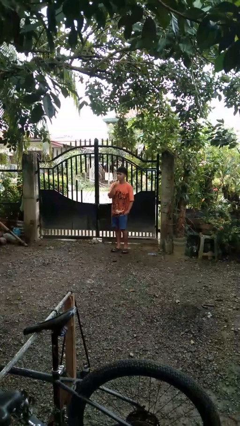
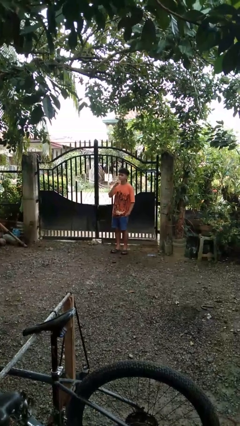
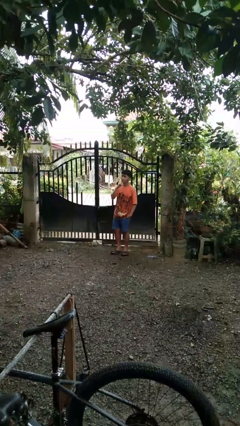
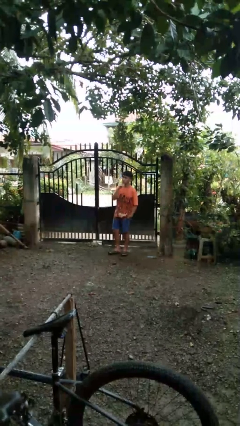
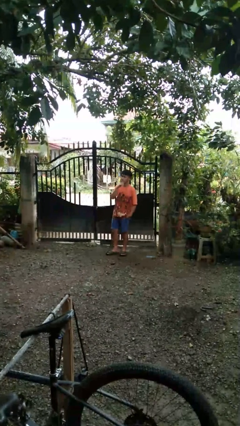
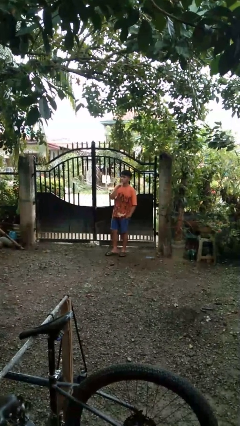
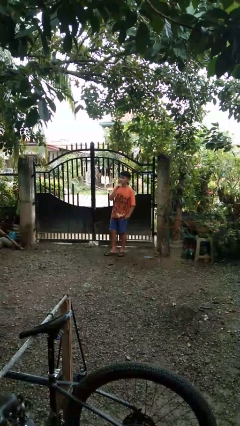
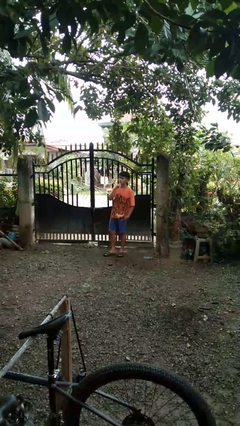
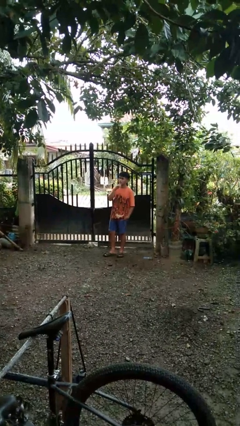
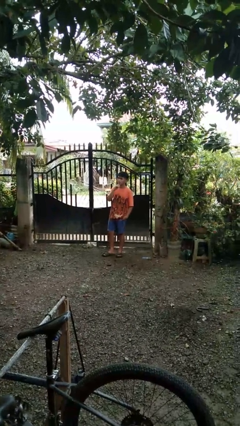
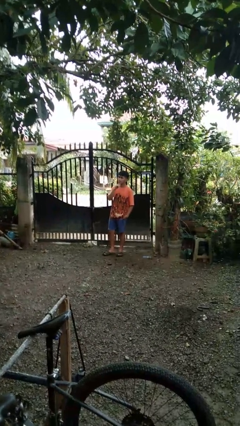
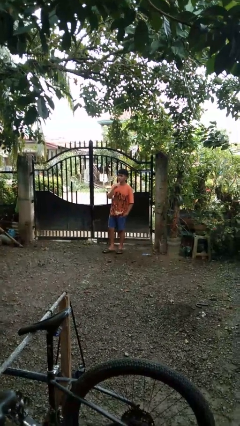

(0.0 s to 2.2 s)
person strokes chin

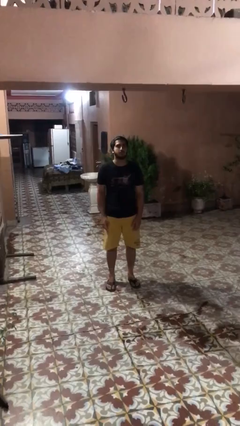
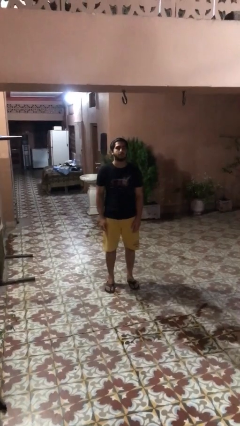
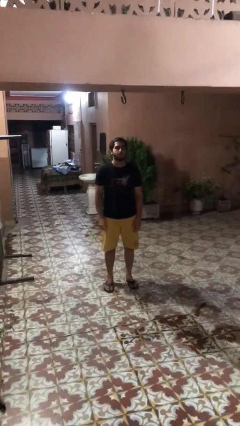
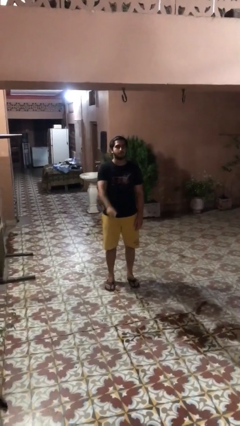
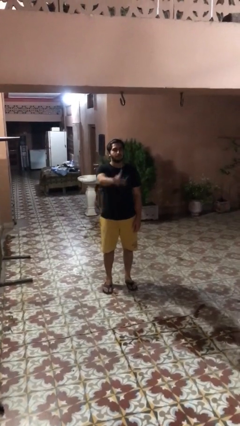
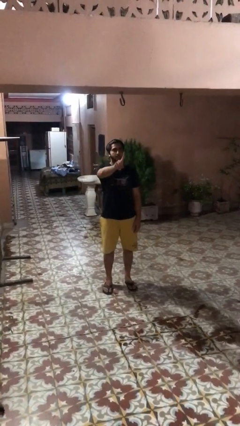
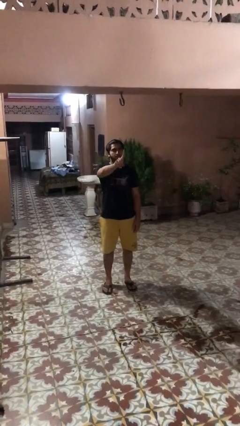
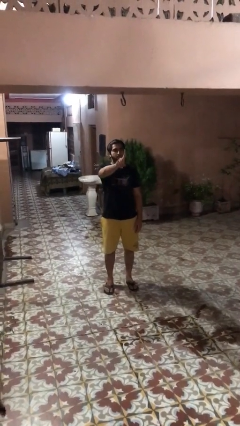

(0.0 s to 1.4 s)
person gestures number one

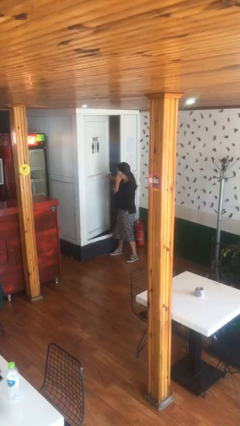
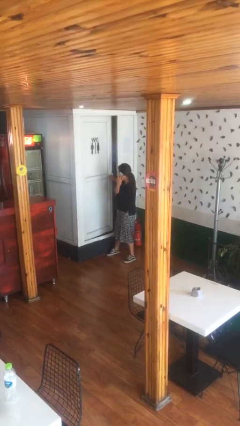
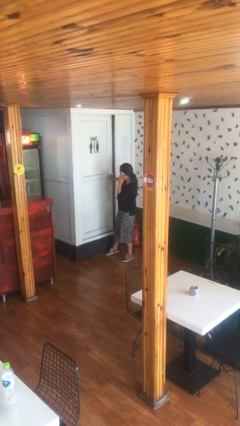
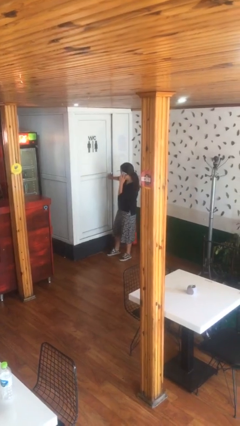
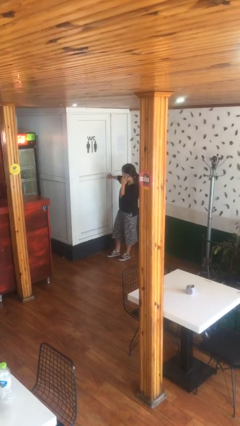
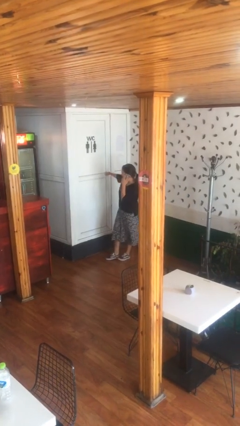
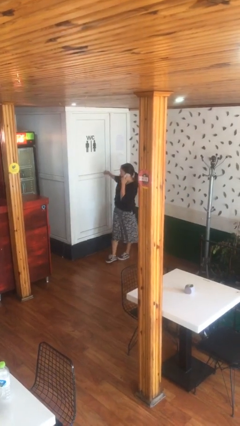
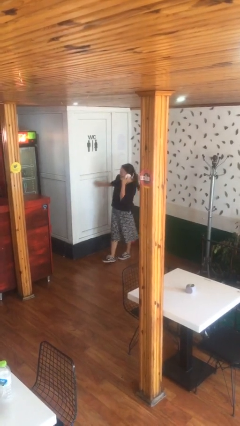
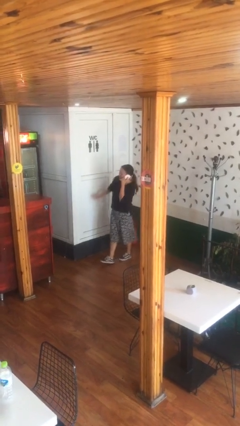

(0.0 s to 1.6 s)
person closes facility door

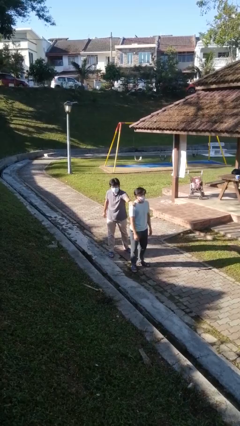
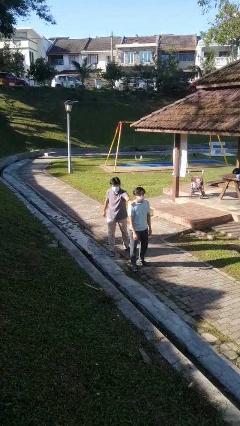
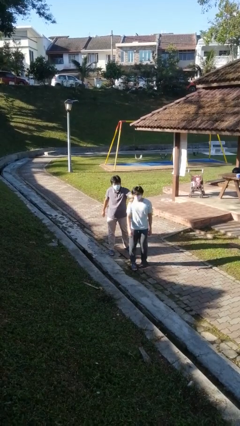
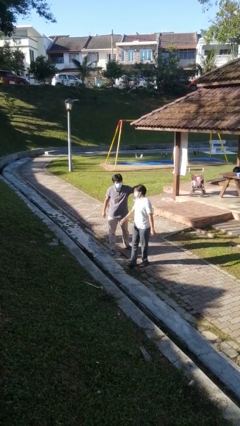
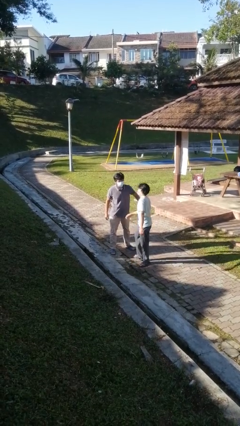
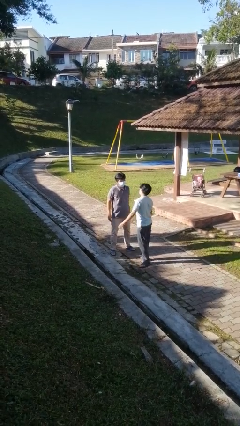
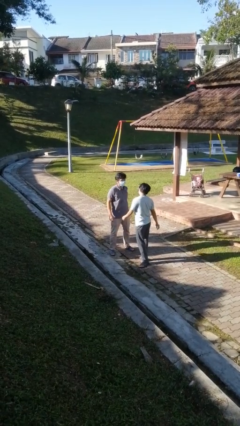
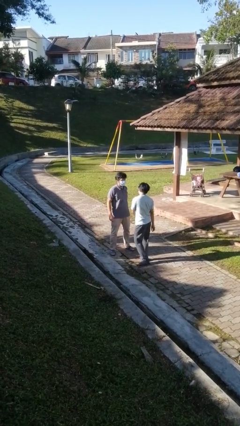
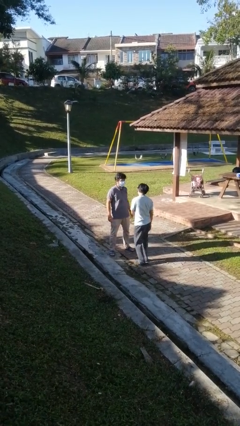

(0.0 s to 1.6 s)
person spins person around

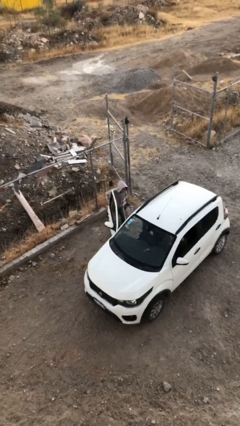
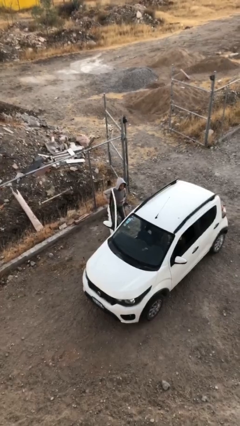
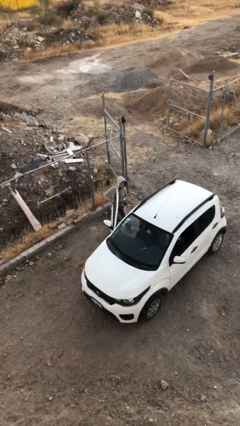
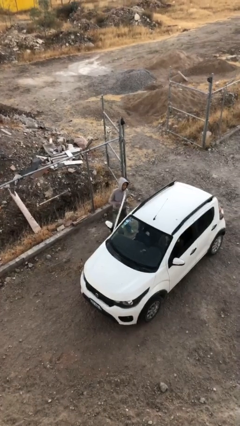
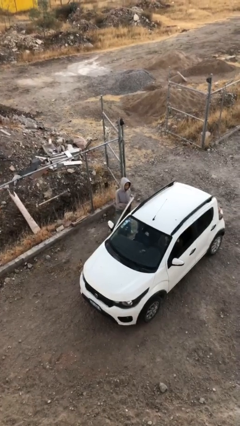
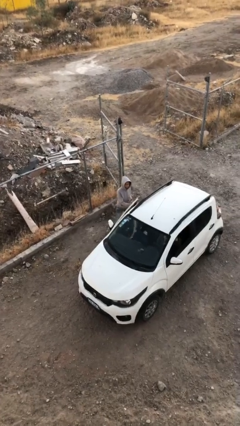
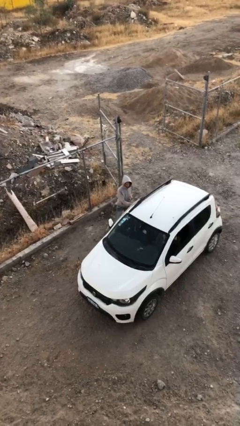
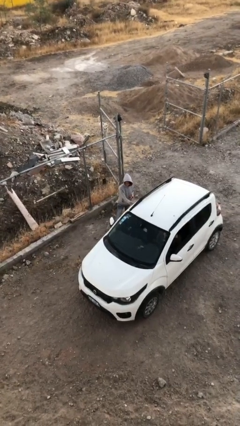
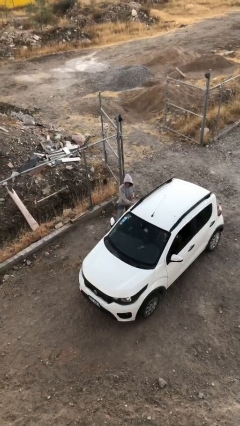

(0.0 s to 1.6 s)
person closes car door

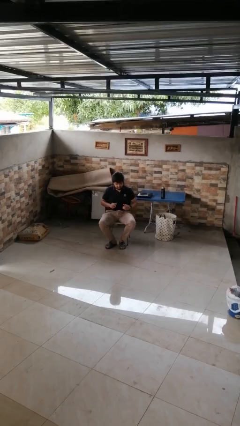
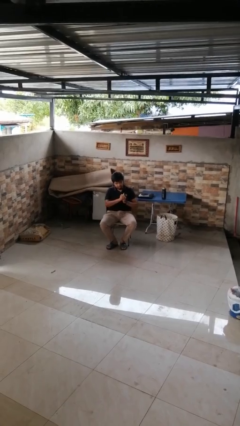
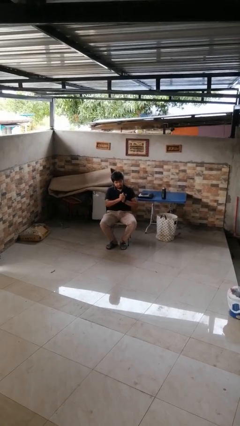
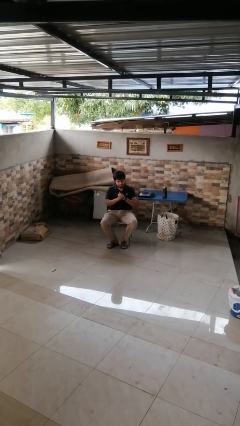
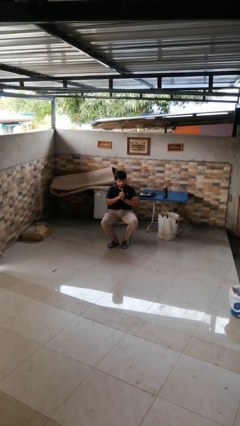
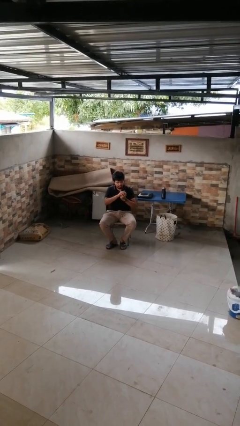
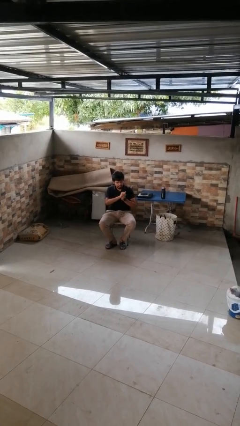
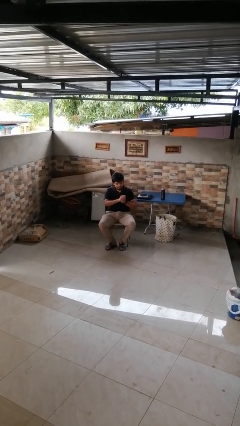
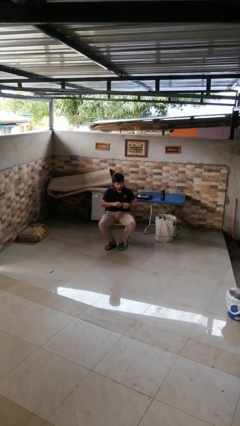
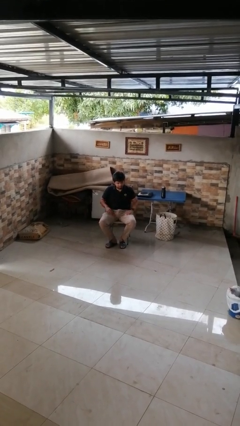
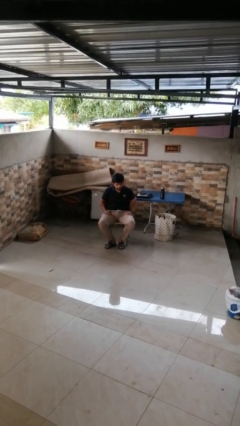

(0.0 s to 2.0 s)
person cracks knuckles

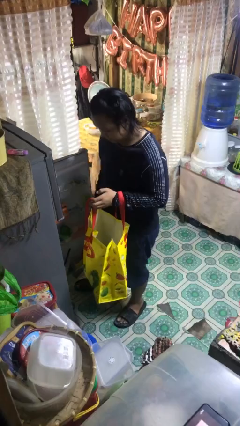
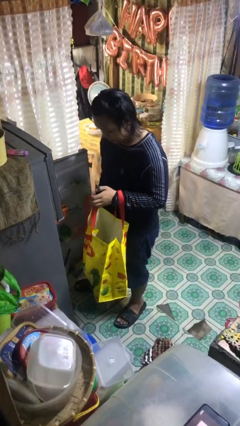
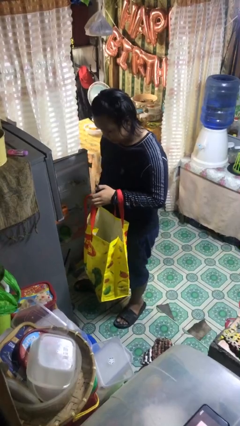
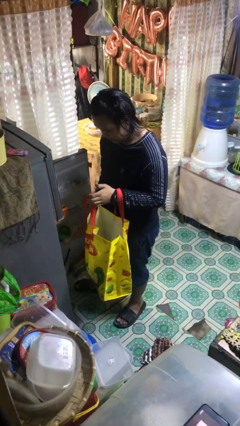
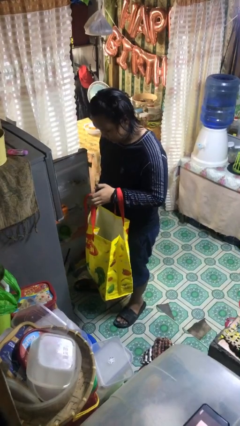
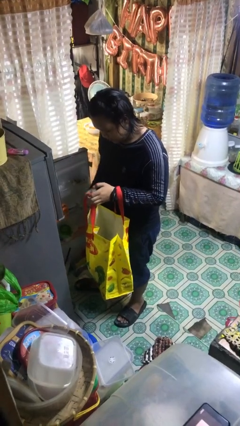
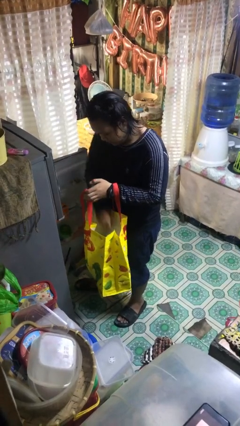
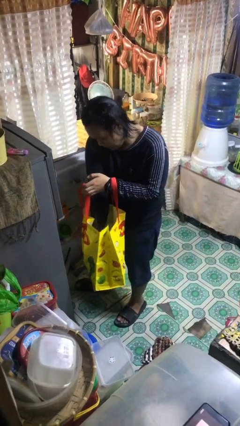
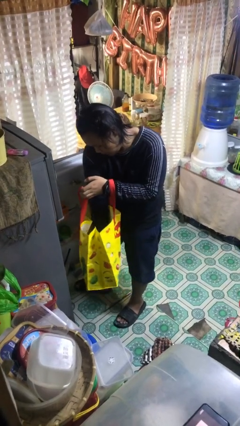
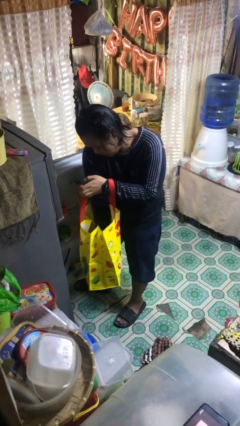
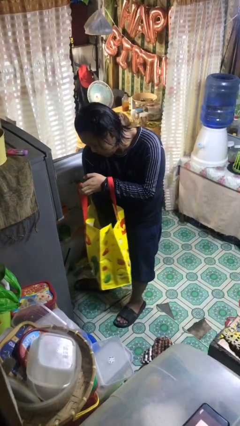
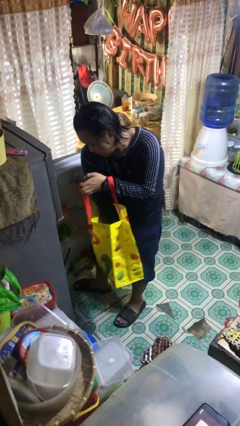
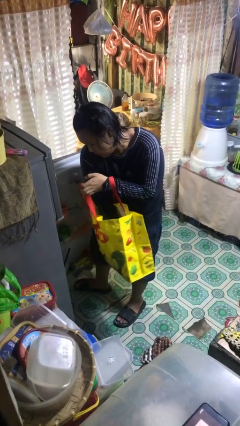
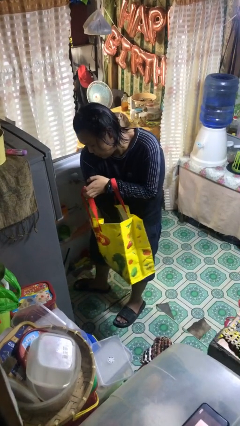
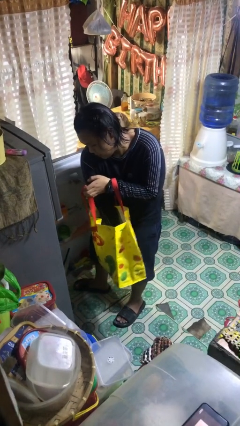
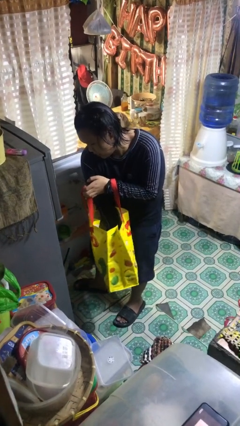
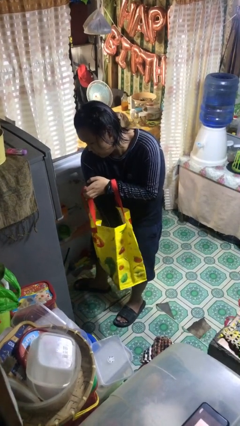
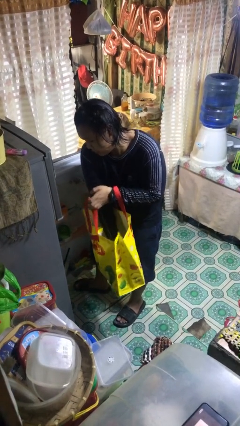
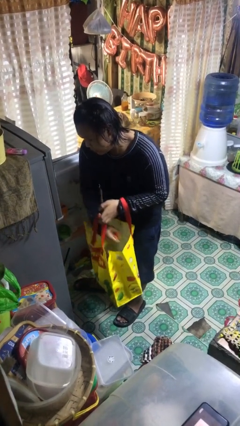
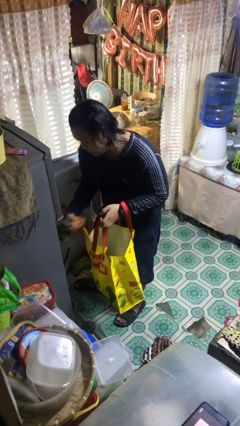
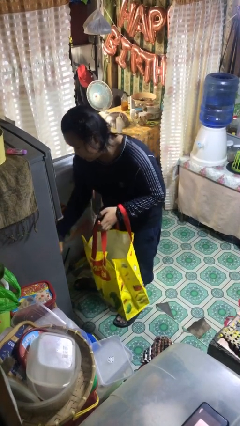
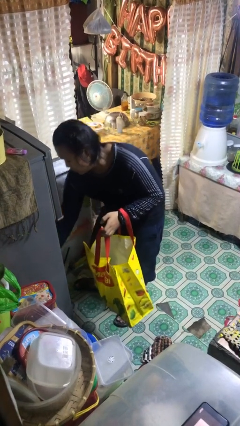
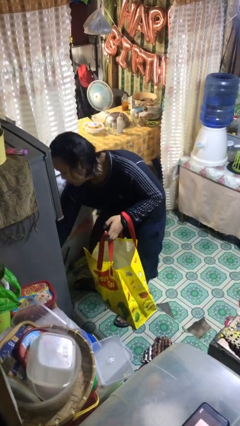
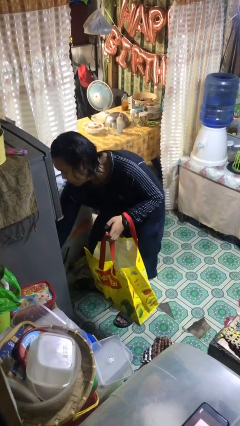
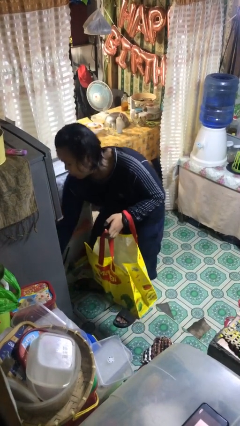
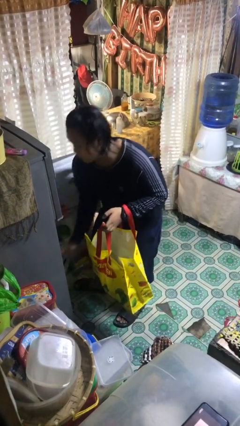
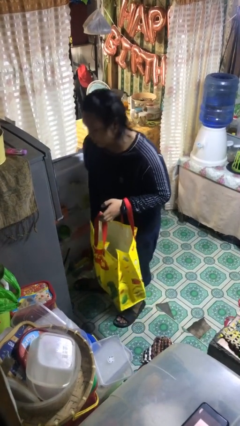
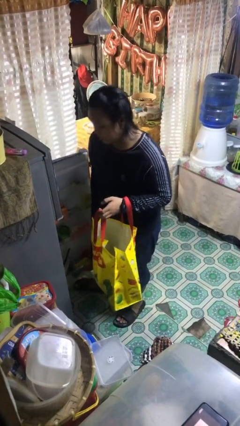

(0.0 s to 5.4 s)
person loads groceries into refrigerator

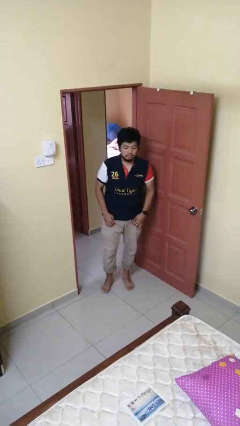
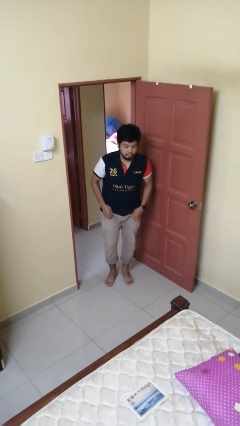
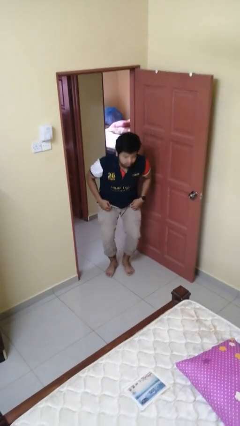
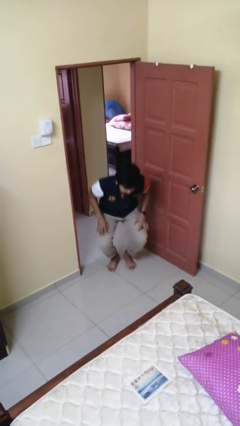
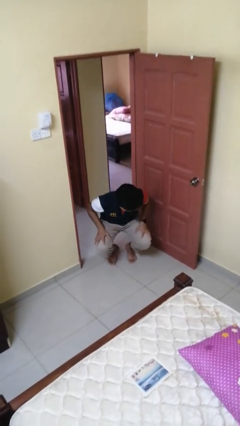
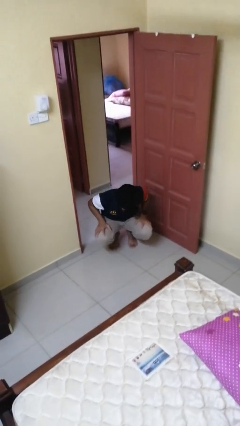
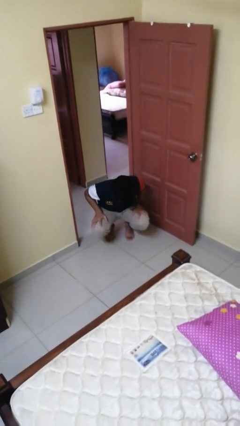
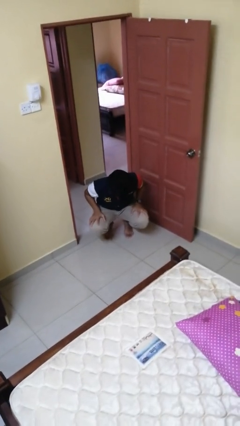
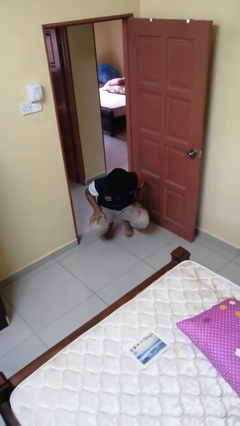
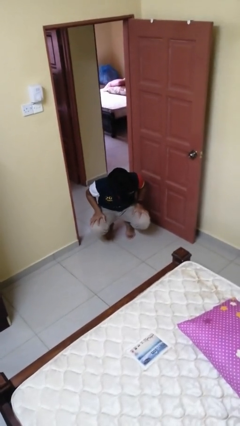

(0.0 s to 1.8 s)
person squats
